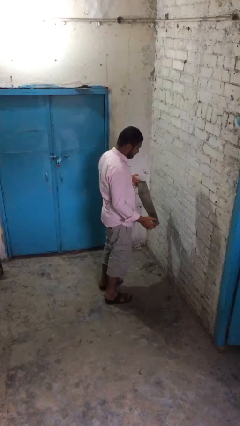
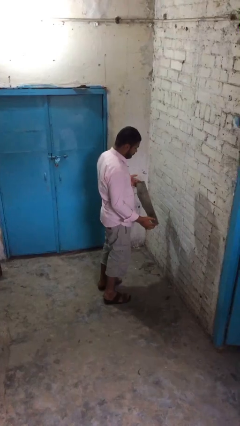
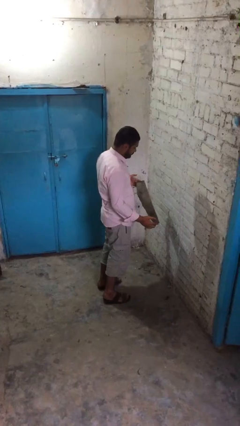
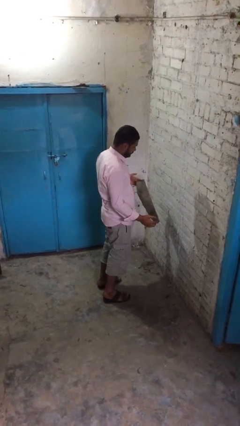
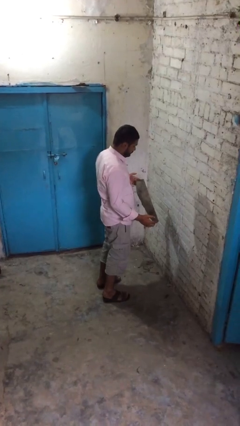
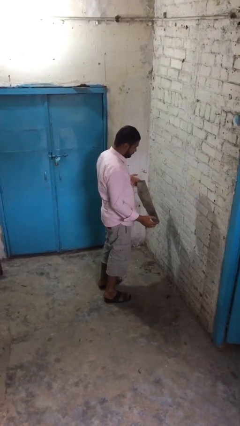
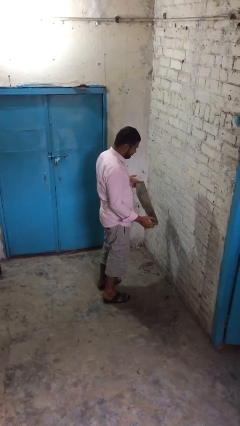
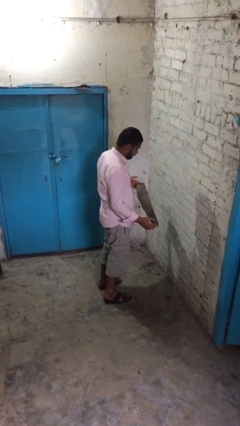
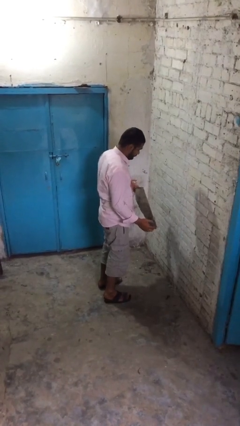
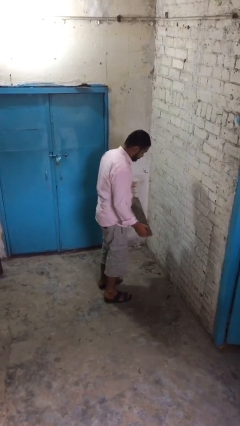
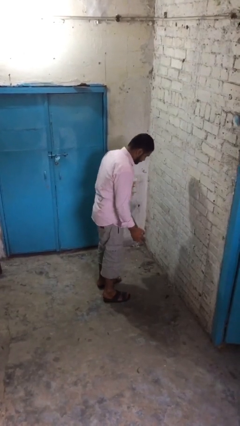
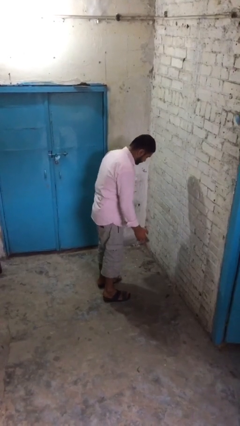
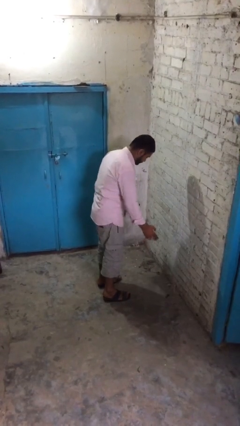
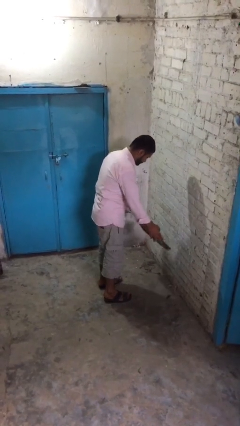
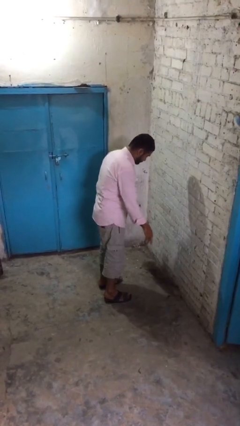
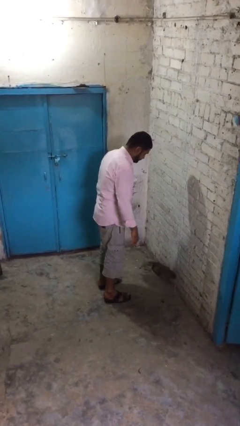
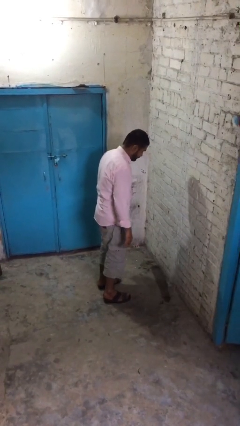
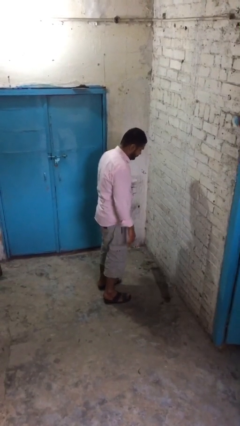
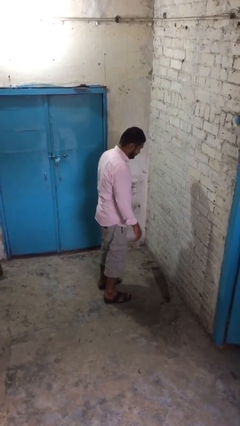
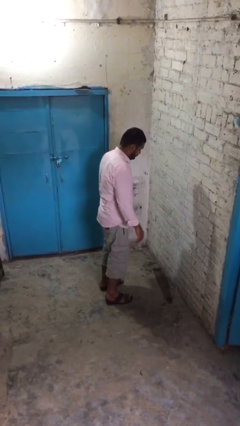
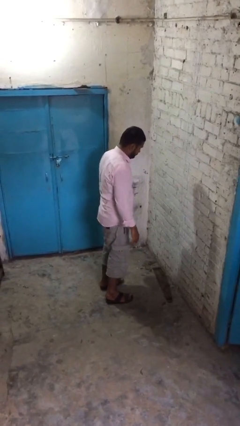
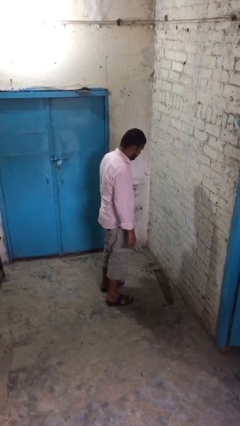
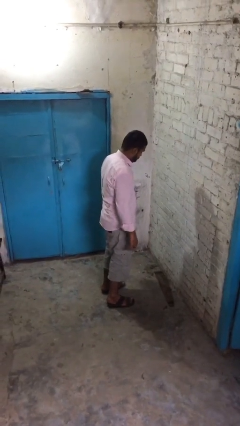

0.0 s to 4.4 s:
person puts down object on floor

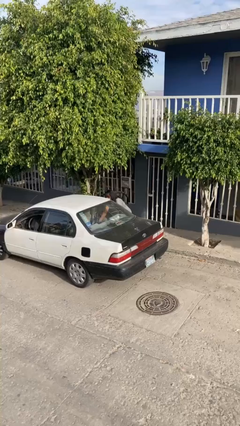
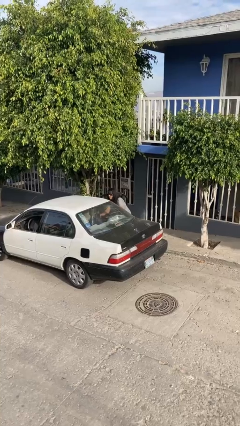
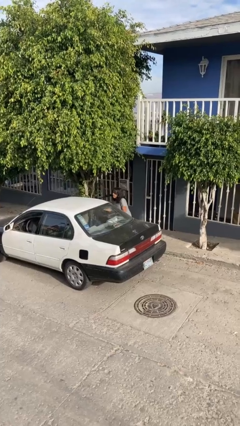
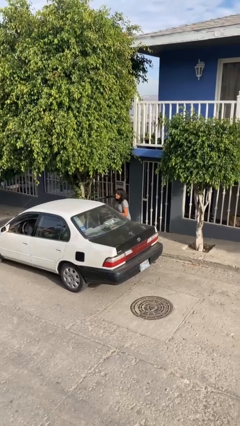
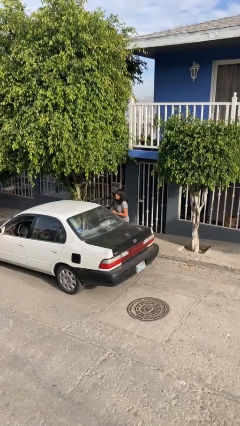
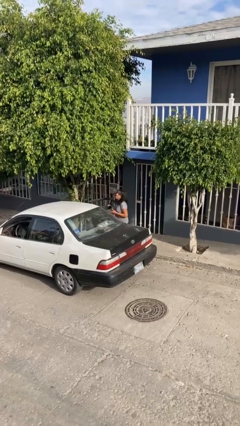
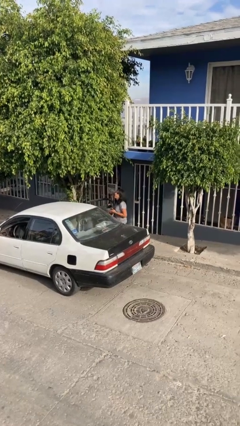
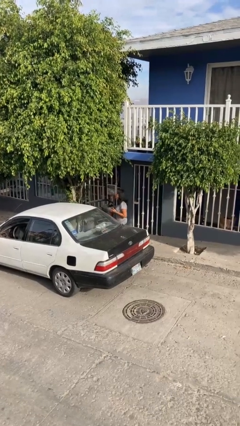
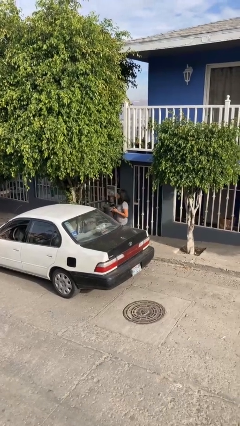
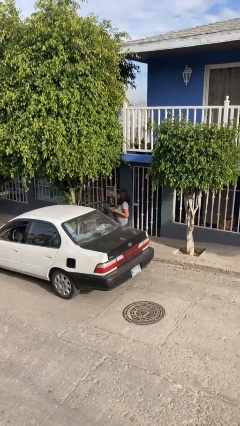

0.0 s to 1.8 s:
person unloads car

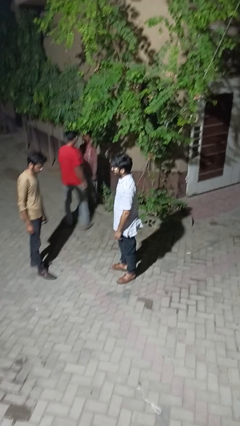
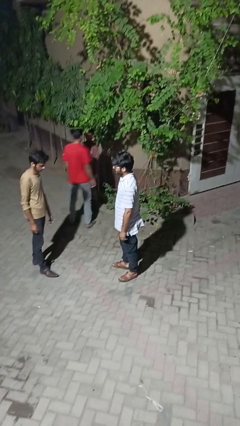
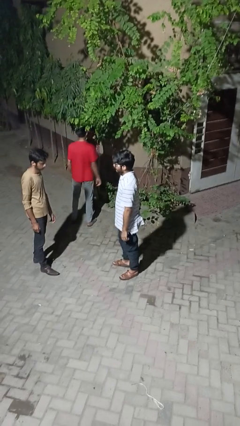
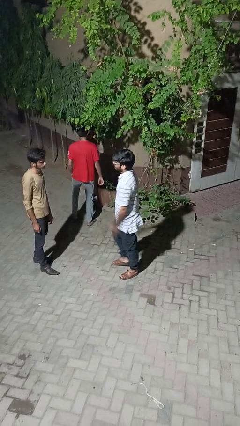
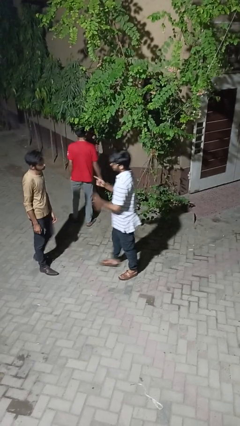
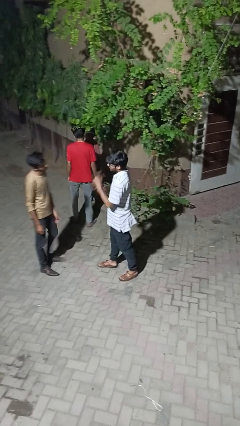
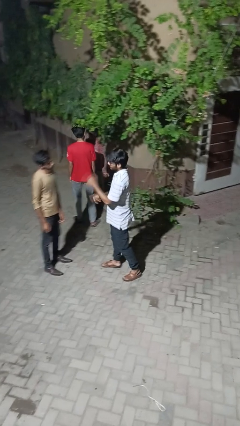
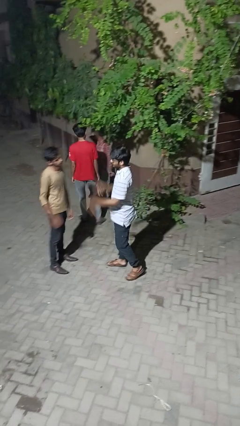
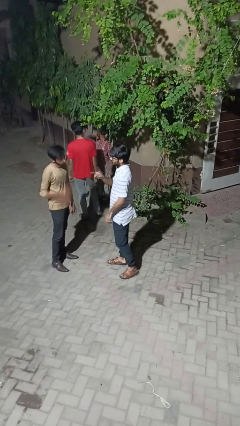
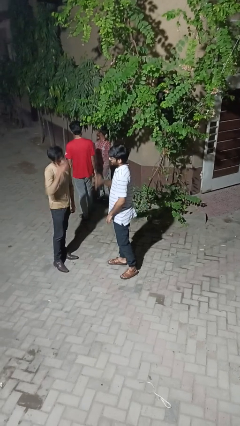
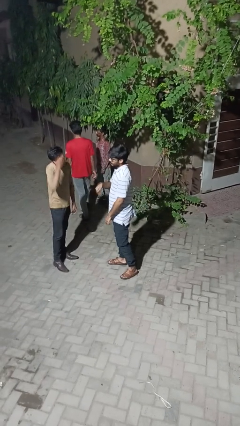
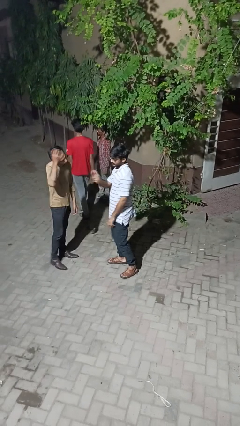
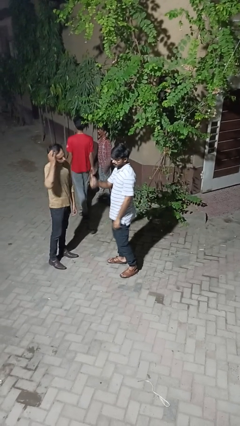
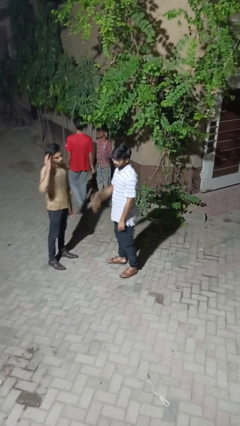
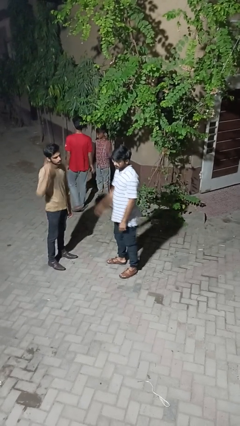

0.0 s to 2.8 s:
person talks to person

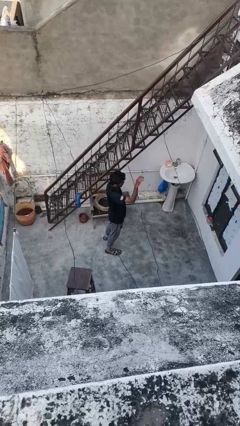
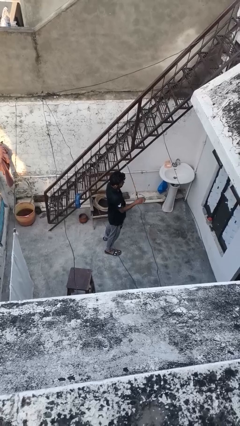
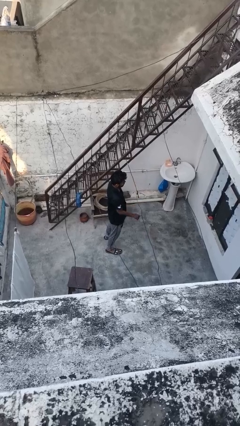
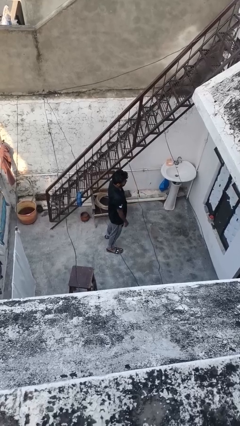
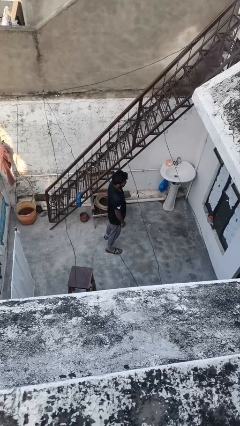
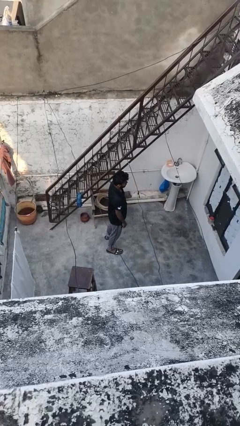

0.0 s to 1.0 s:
person gestures lower hand

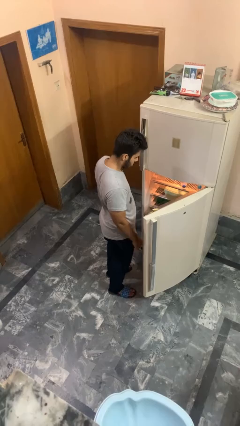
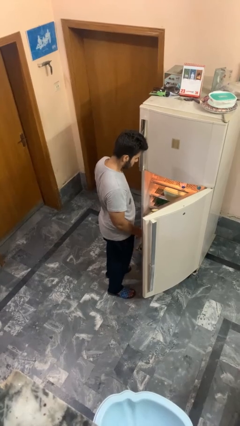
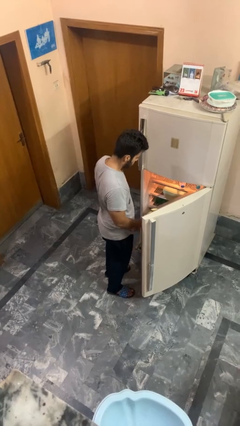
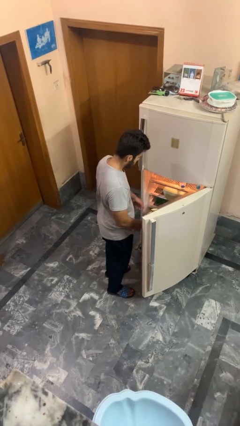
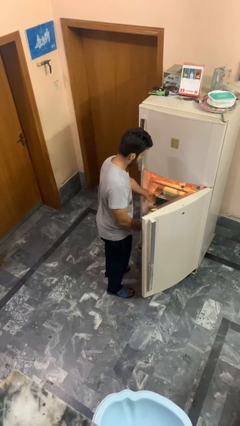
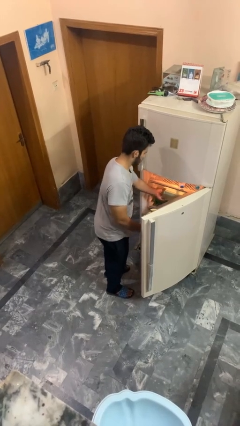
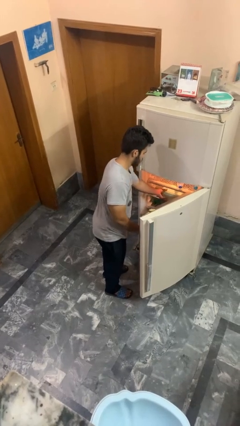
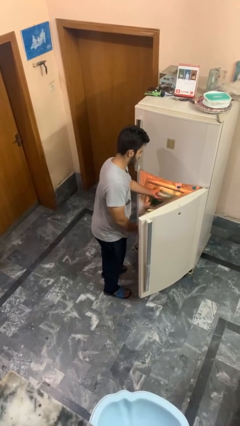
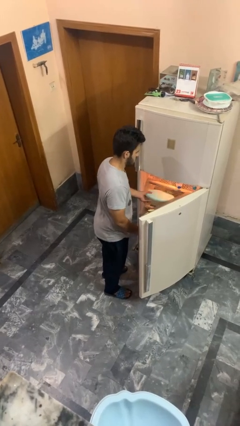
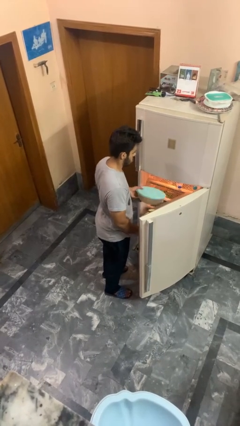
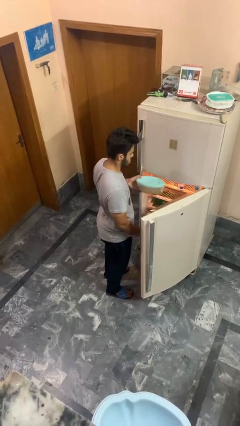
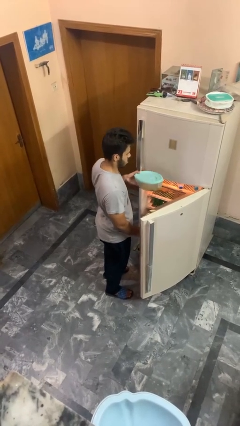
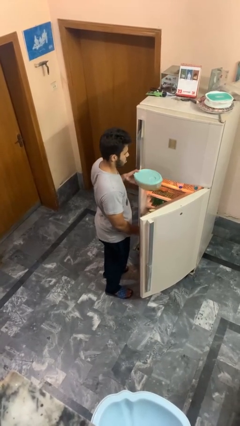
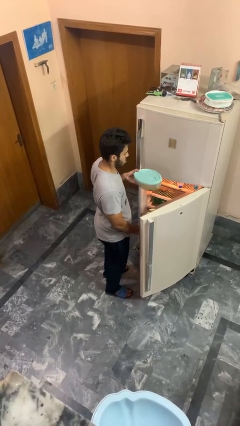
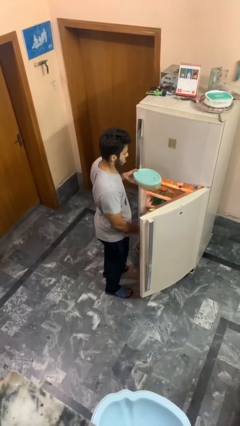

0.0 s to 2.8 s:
person picks up object from cabinet

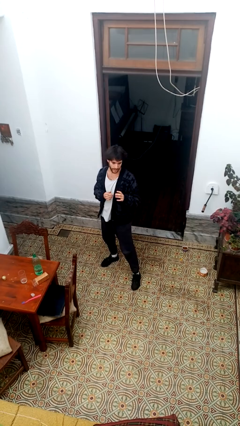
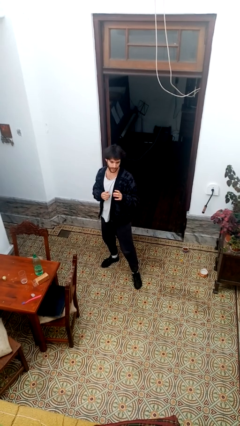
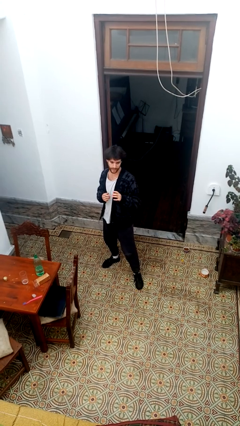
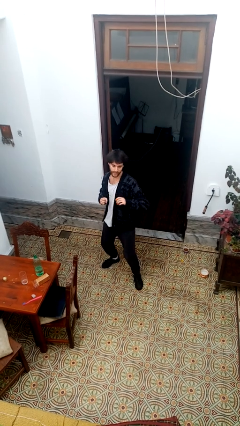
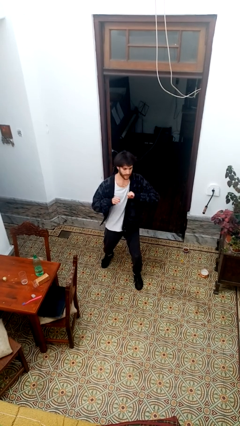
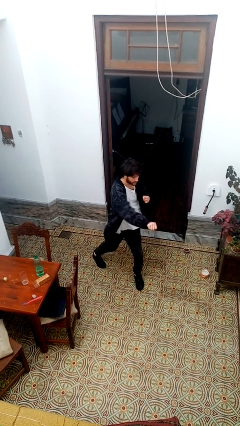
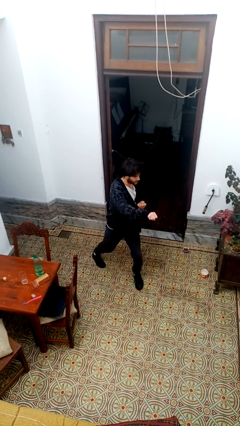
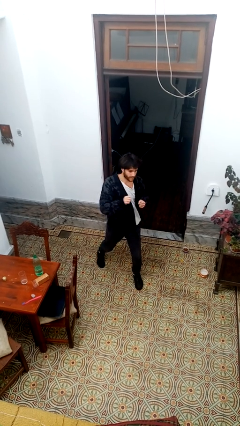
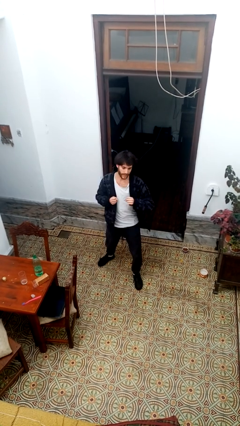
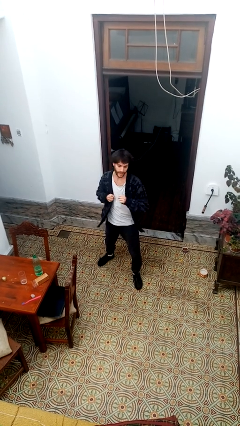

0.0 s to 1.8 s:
person karate chop

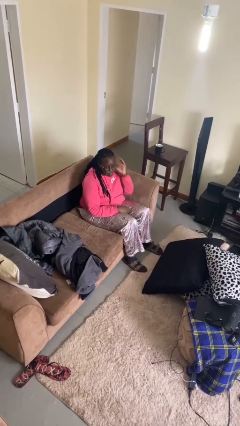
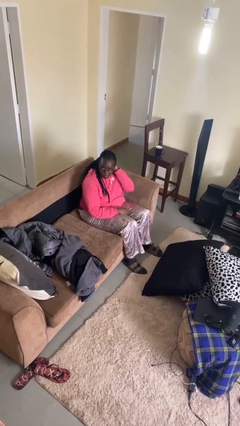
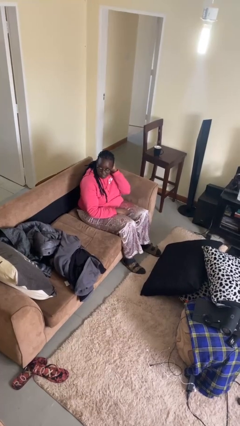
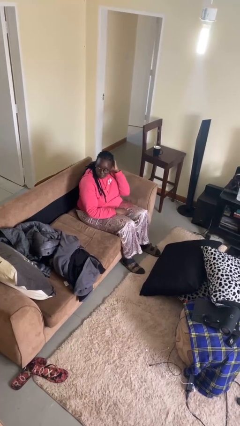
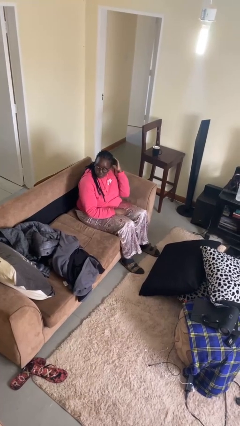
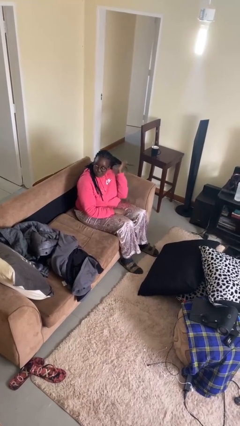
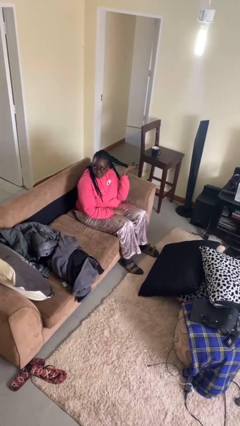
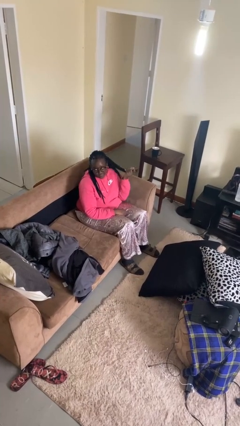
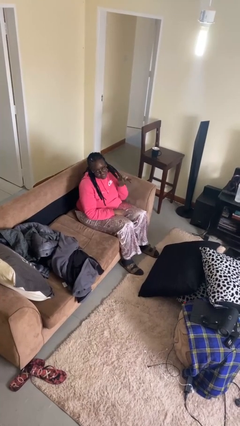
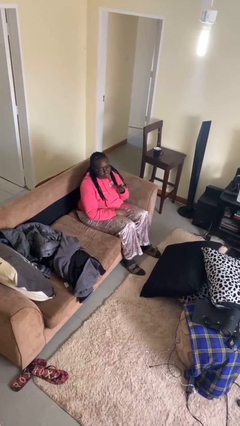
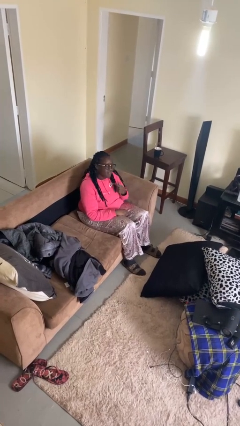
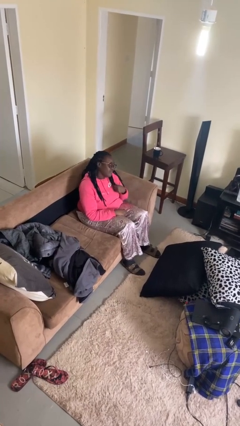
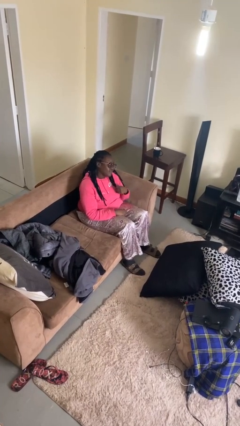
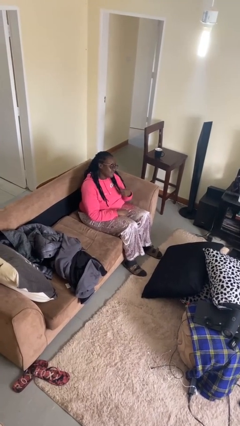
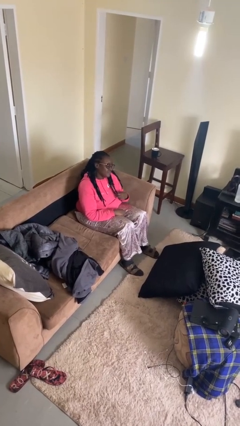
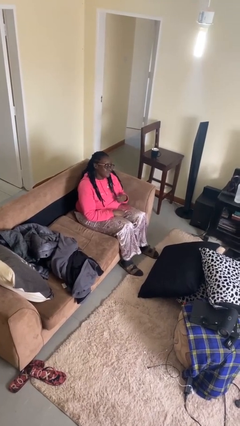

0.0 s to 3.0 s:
person strokes hair
